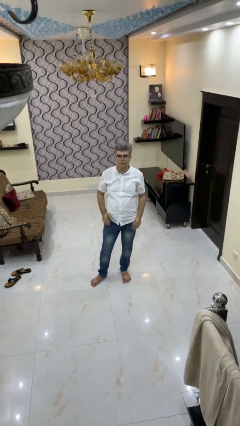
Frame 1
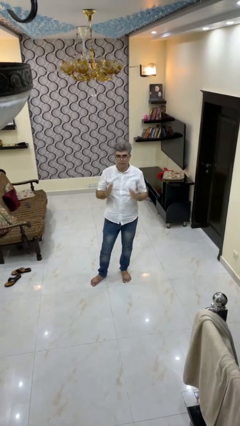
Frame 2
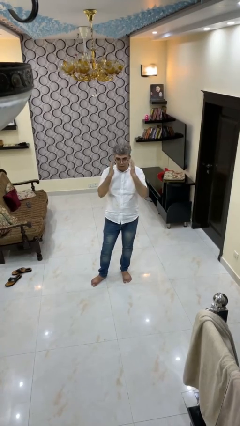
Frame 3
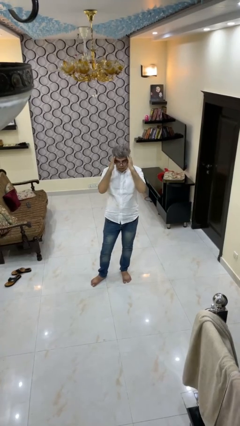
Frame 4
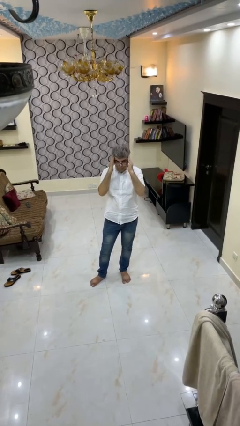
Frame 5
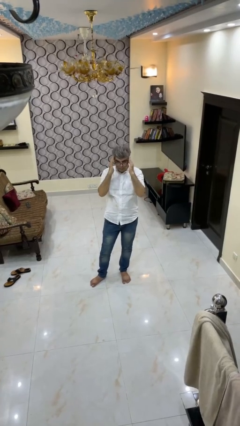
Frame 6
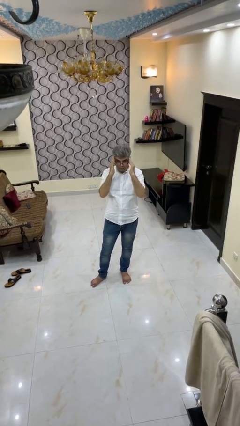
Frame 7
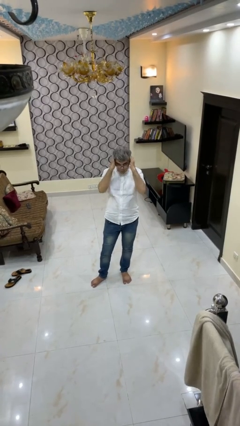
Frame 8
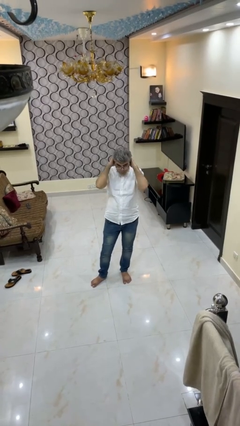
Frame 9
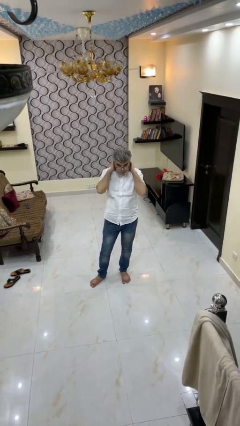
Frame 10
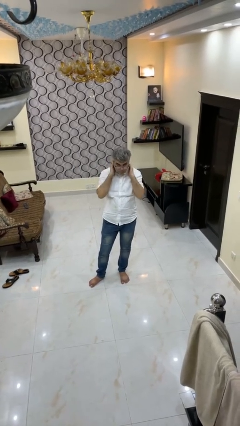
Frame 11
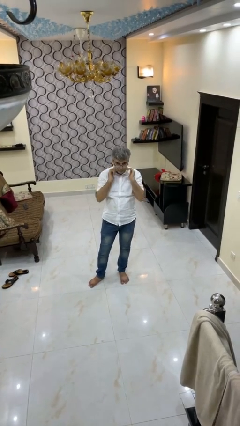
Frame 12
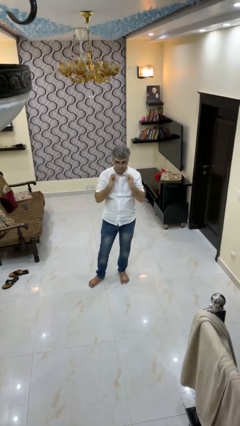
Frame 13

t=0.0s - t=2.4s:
person strokes hair

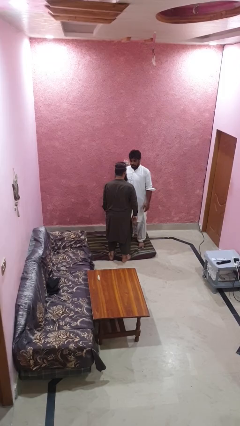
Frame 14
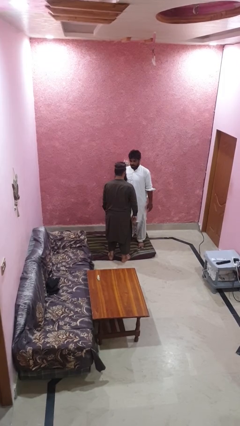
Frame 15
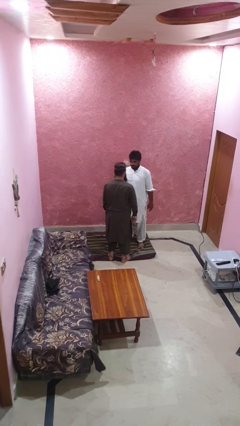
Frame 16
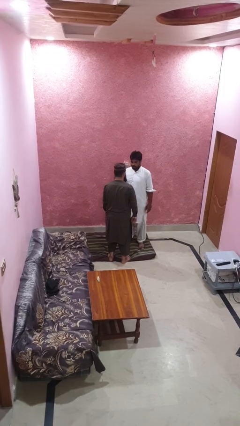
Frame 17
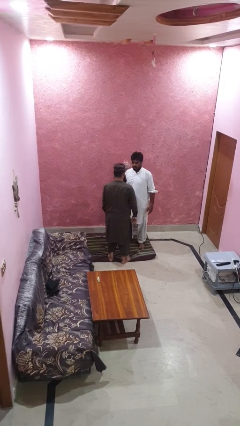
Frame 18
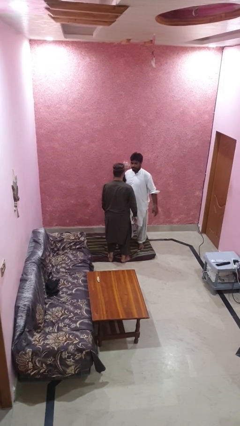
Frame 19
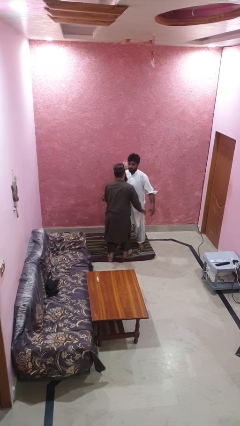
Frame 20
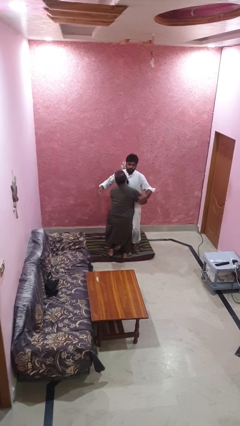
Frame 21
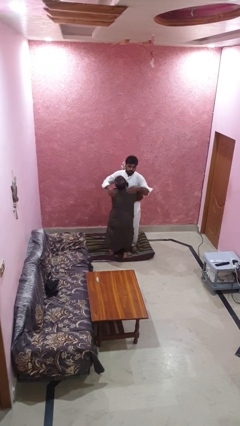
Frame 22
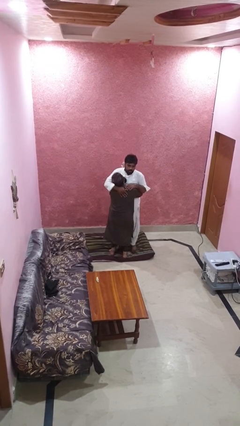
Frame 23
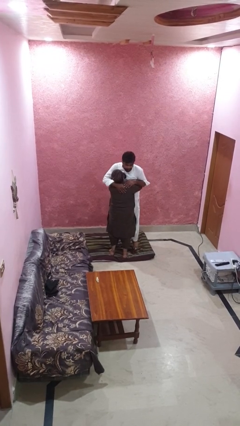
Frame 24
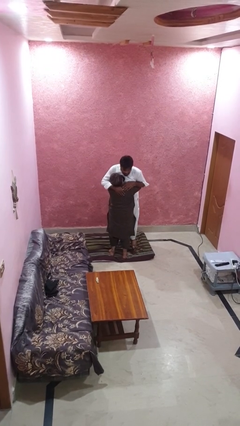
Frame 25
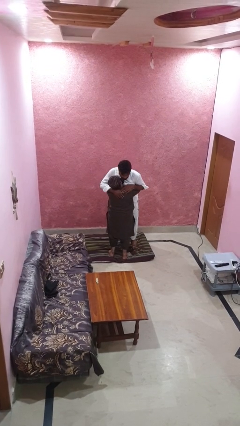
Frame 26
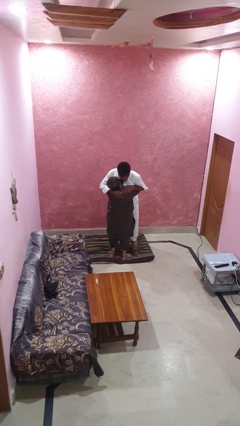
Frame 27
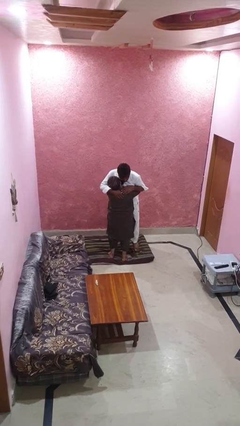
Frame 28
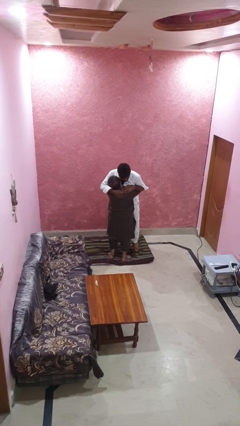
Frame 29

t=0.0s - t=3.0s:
person picks up person

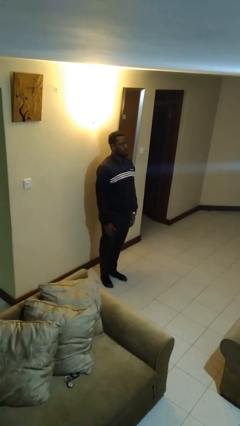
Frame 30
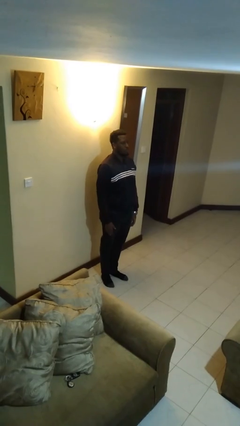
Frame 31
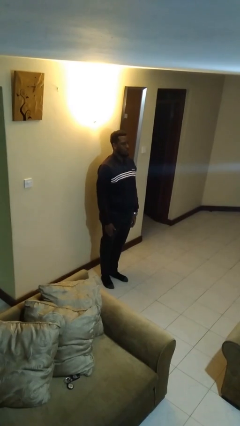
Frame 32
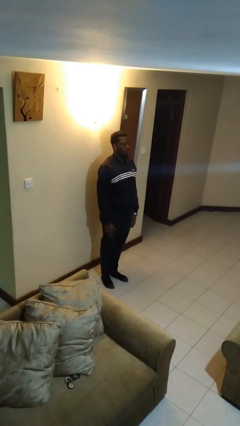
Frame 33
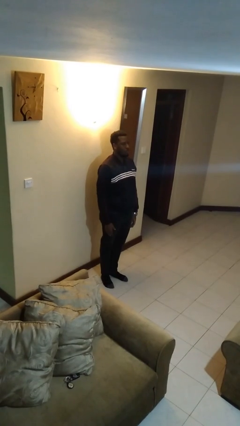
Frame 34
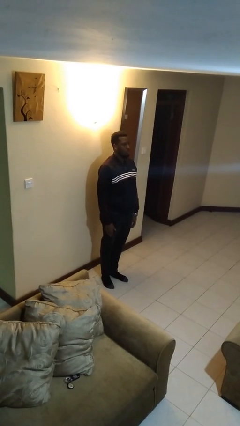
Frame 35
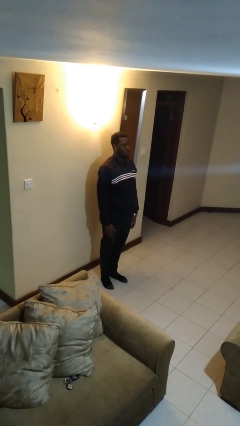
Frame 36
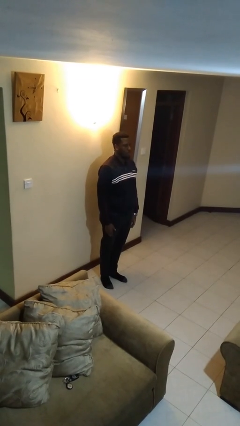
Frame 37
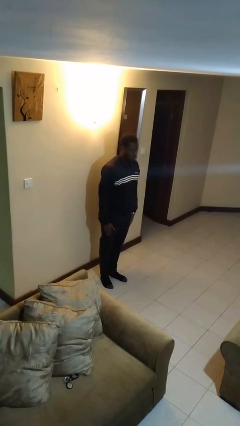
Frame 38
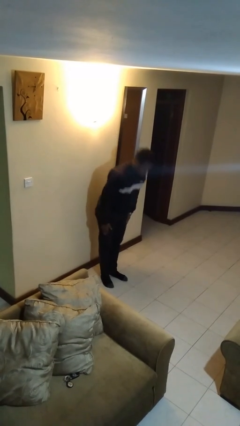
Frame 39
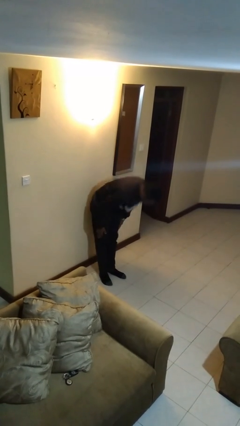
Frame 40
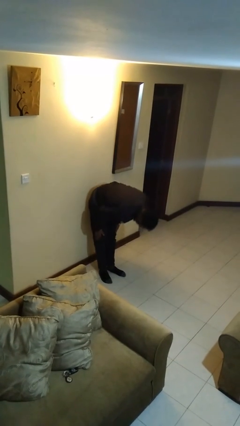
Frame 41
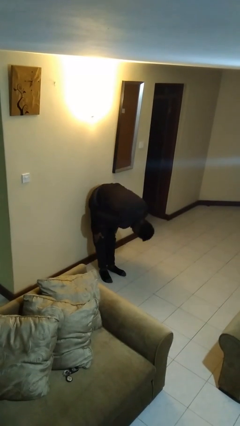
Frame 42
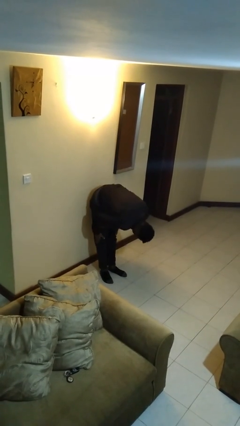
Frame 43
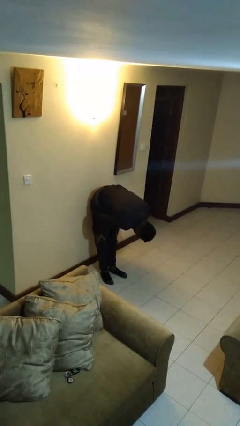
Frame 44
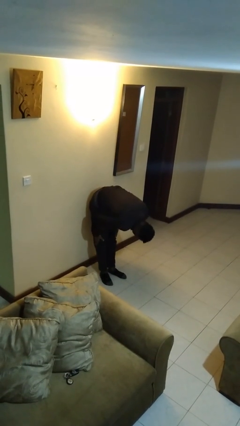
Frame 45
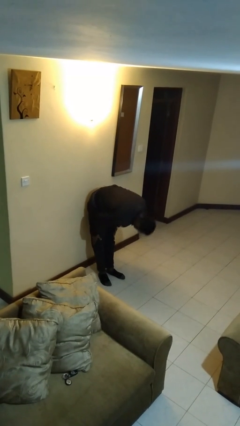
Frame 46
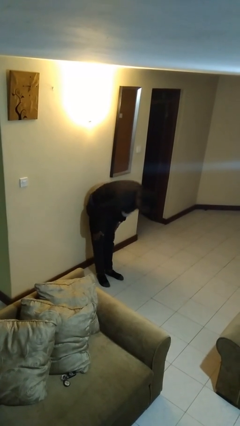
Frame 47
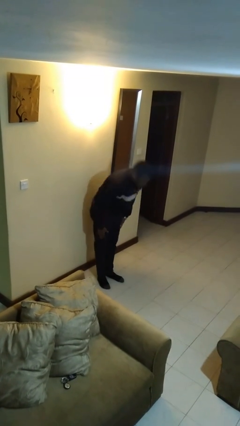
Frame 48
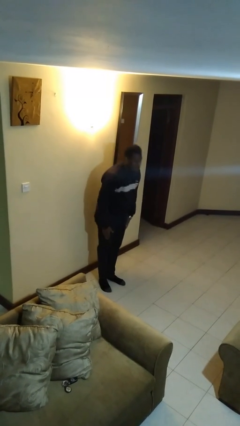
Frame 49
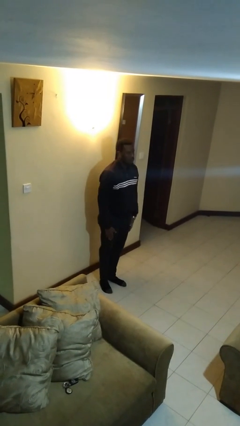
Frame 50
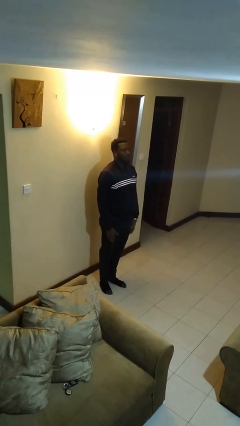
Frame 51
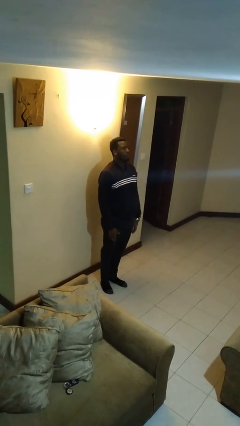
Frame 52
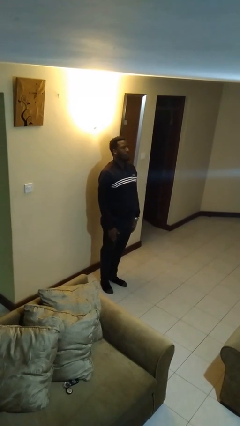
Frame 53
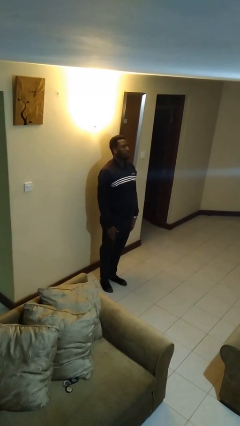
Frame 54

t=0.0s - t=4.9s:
person bows

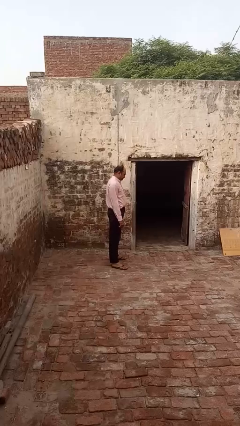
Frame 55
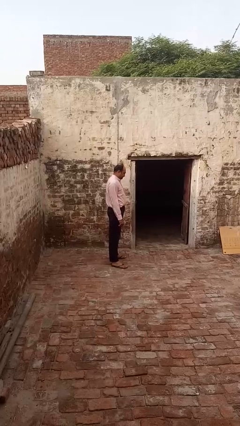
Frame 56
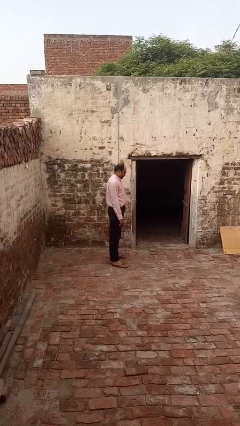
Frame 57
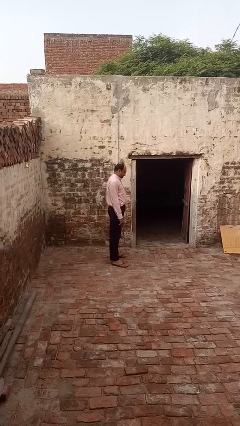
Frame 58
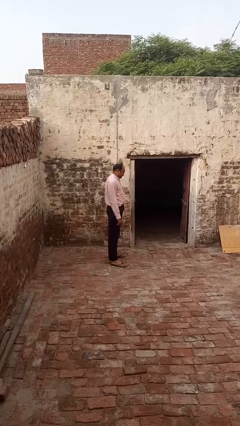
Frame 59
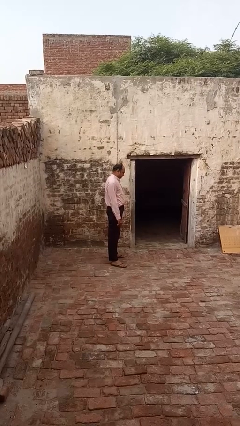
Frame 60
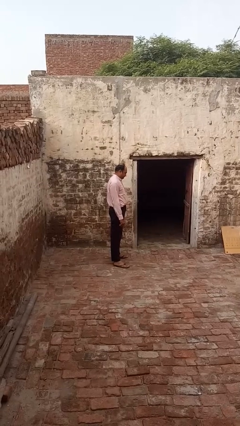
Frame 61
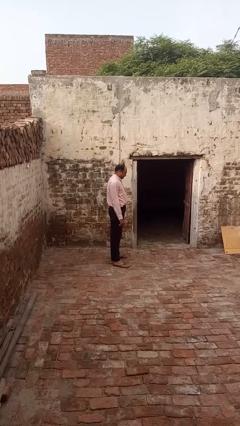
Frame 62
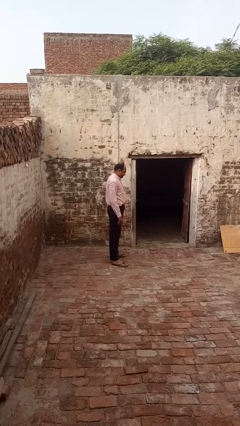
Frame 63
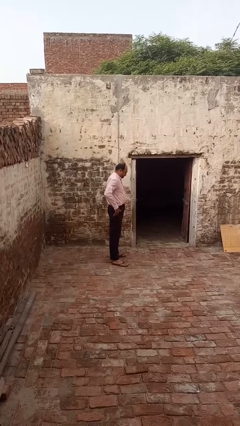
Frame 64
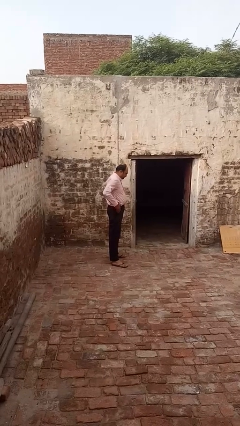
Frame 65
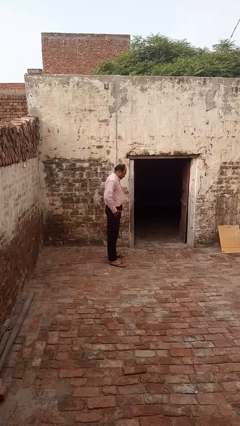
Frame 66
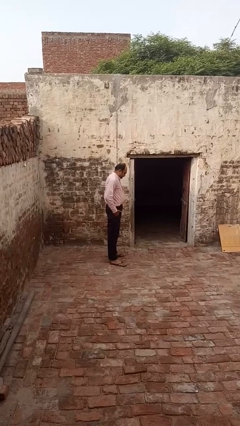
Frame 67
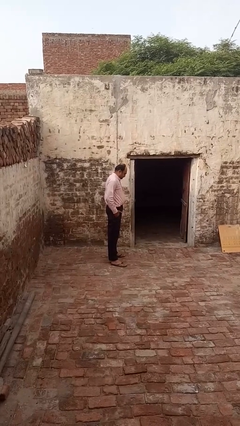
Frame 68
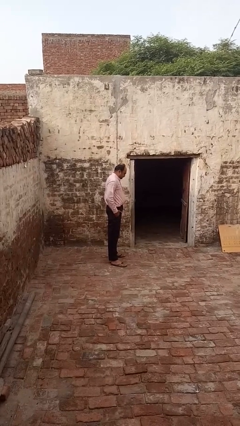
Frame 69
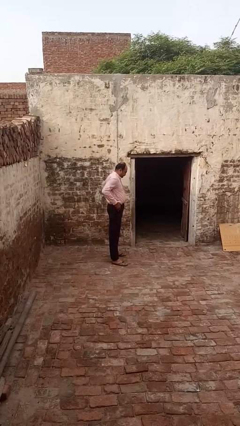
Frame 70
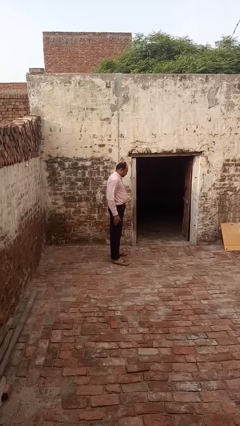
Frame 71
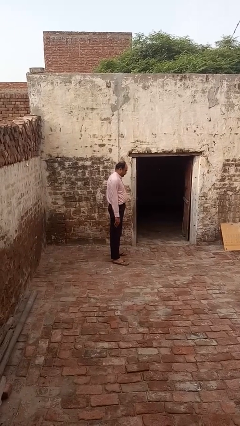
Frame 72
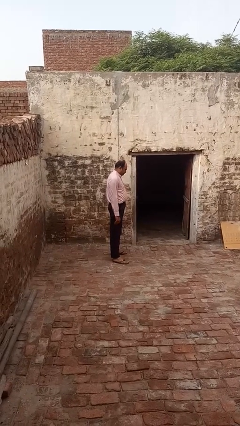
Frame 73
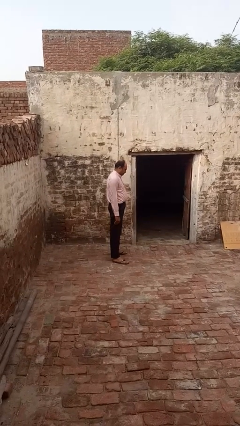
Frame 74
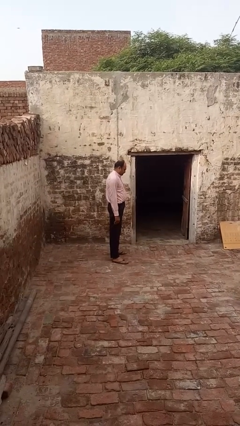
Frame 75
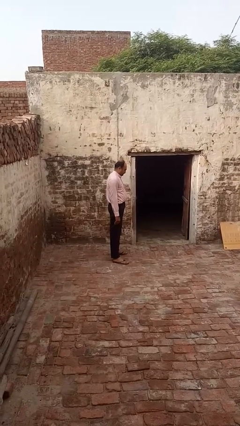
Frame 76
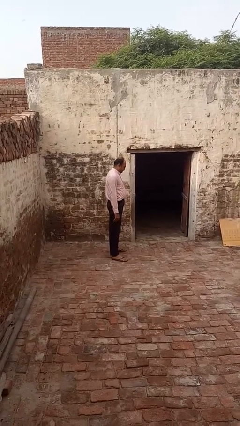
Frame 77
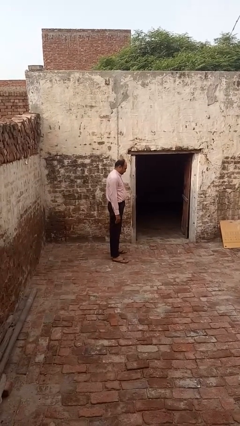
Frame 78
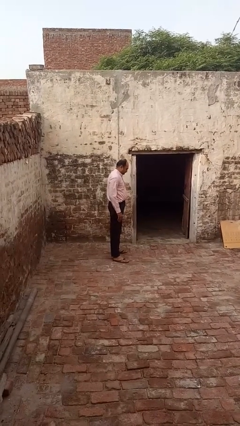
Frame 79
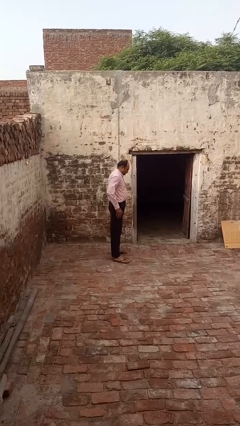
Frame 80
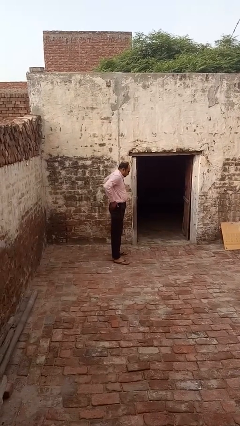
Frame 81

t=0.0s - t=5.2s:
person puts hands in back pockets

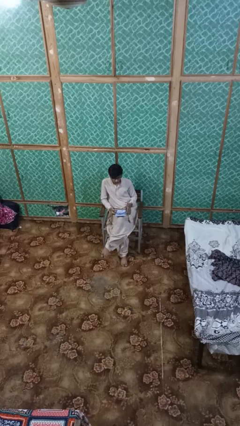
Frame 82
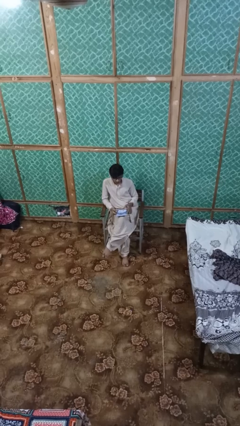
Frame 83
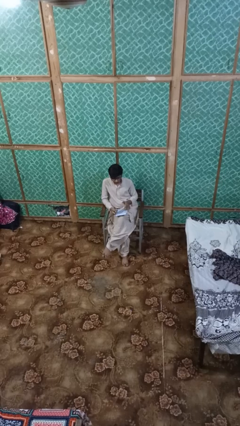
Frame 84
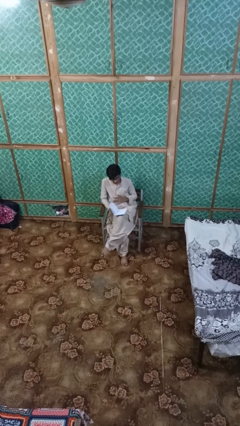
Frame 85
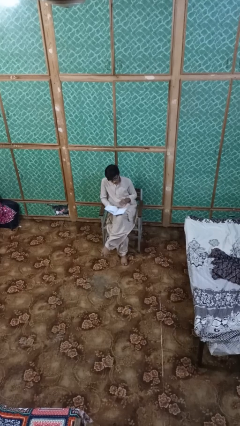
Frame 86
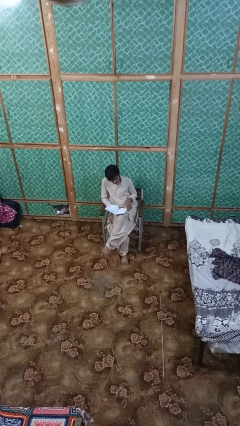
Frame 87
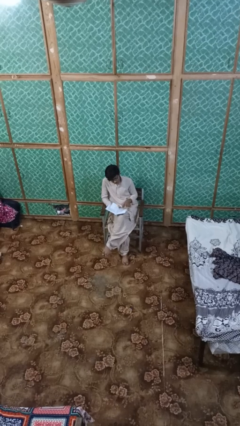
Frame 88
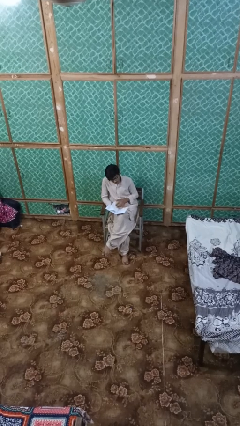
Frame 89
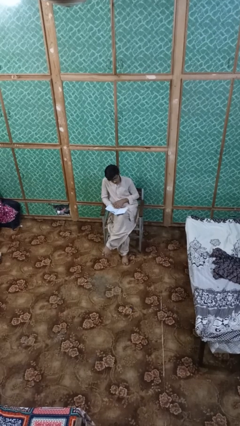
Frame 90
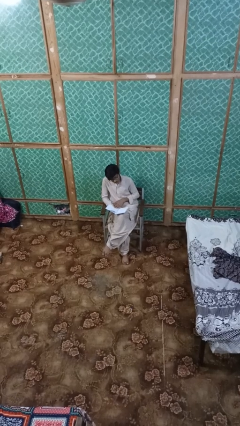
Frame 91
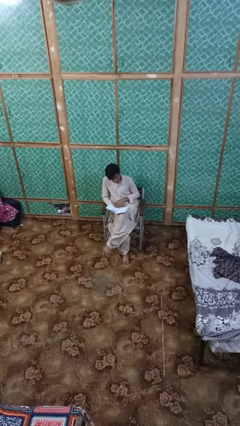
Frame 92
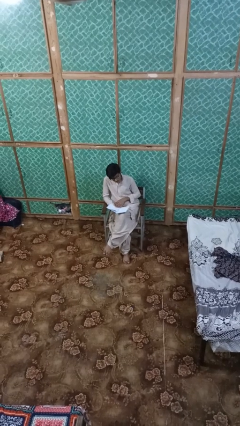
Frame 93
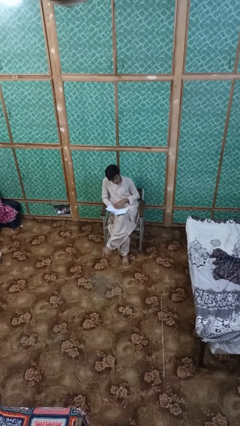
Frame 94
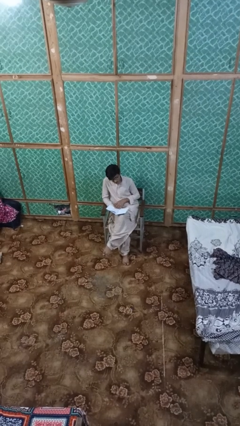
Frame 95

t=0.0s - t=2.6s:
person reads magazine
